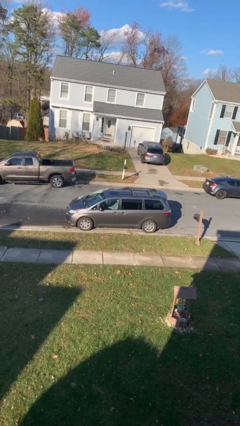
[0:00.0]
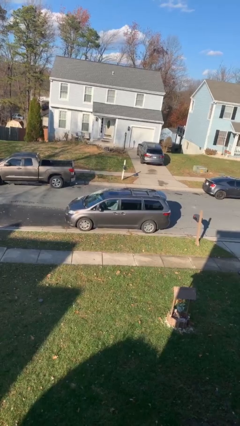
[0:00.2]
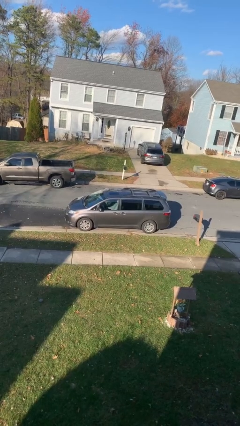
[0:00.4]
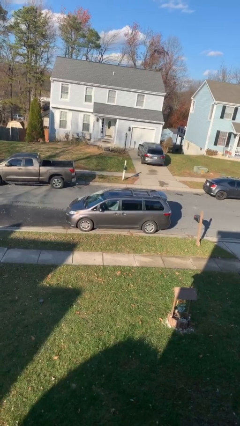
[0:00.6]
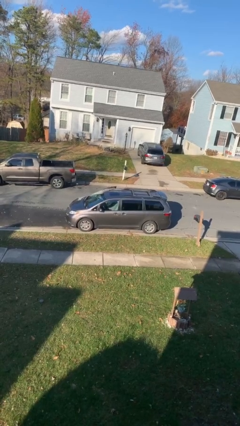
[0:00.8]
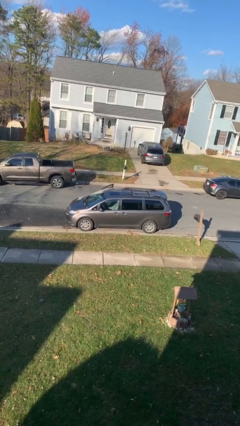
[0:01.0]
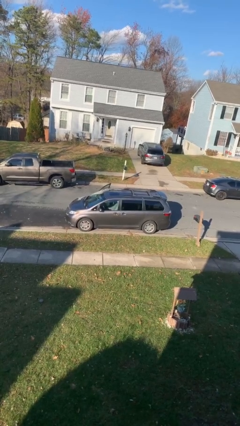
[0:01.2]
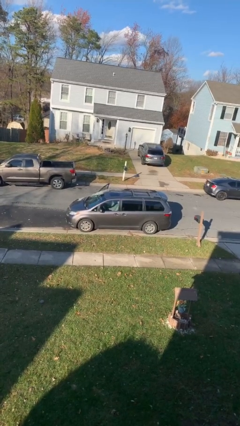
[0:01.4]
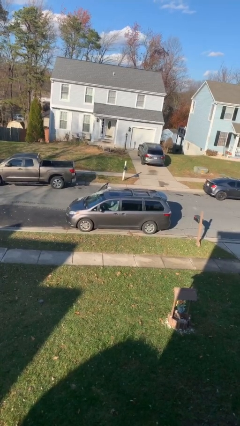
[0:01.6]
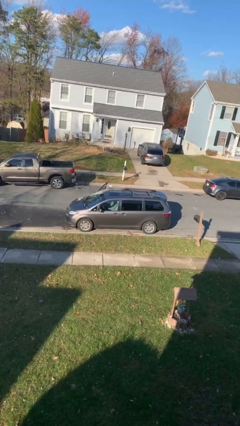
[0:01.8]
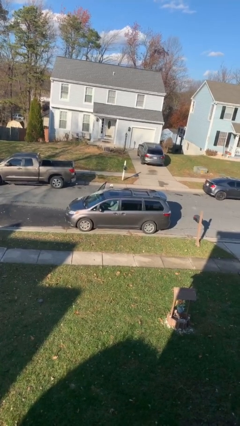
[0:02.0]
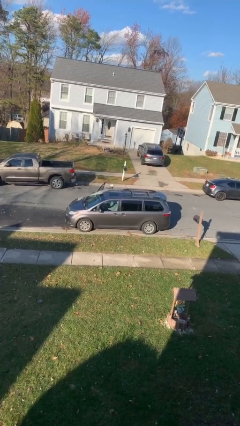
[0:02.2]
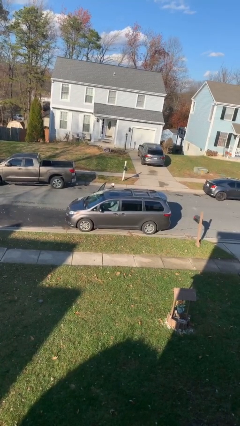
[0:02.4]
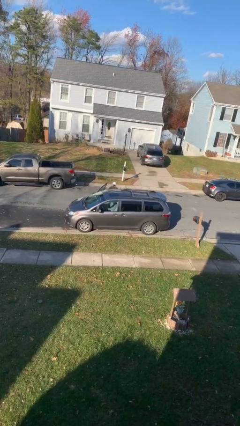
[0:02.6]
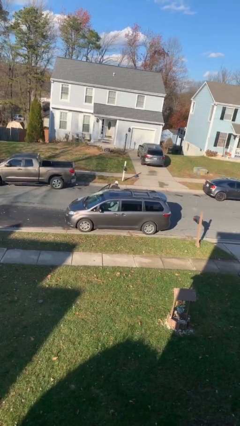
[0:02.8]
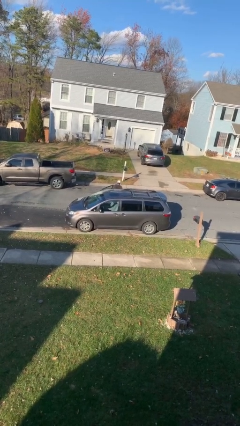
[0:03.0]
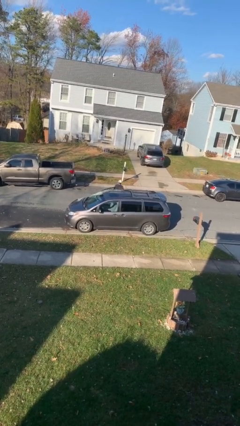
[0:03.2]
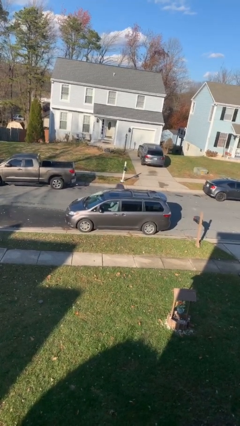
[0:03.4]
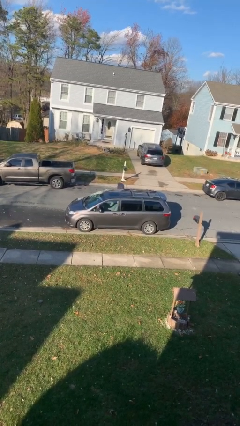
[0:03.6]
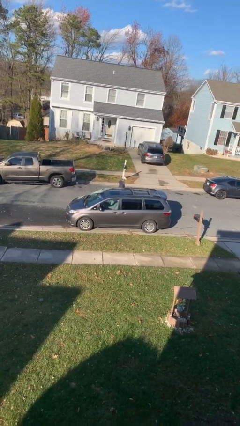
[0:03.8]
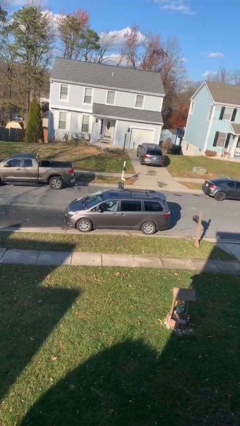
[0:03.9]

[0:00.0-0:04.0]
car drops off person

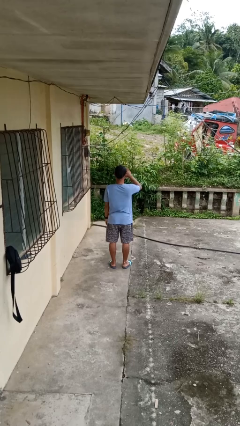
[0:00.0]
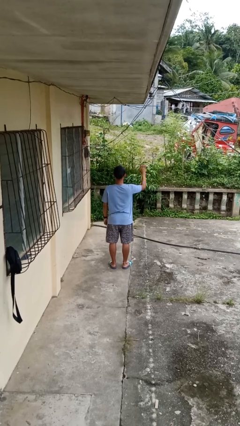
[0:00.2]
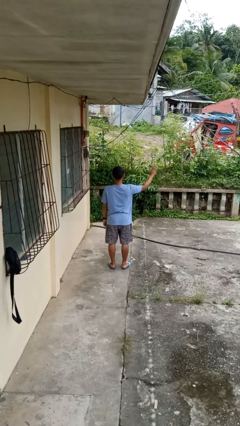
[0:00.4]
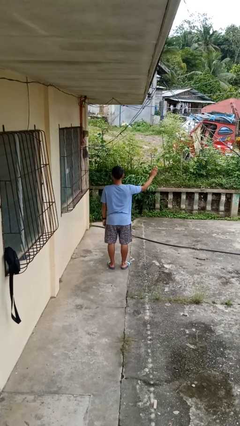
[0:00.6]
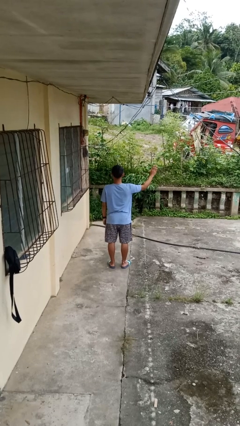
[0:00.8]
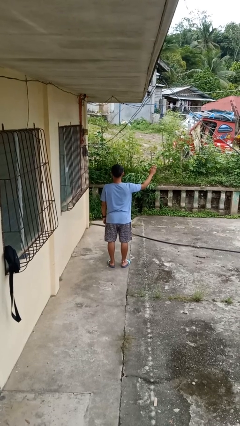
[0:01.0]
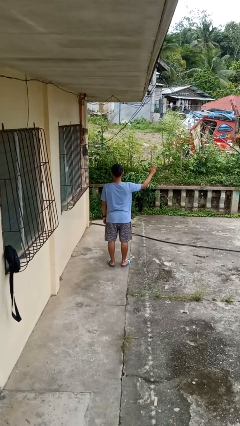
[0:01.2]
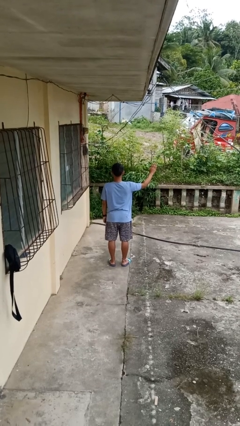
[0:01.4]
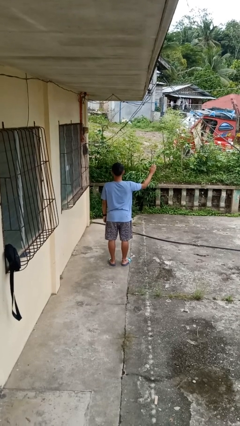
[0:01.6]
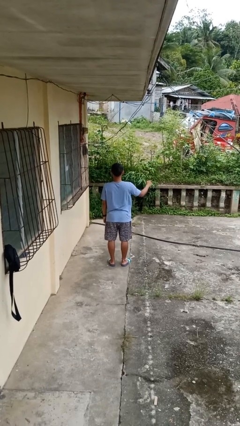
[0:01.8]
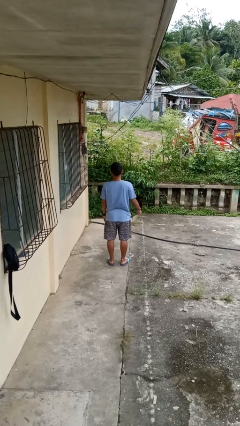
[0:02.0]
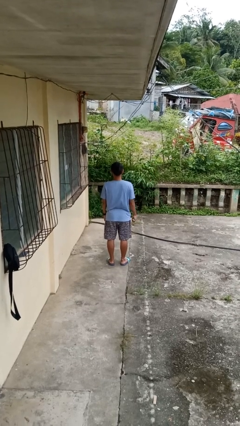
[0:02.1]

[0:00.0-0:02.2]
person gestures swipe right

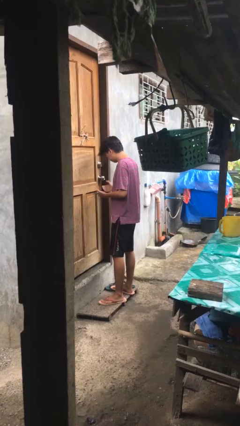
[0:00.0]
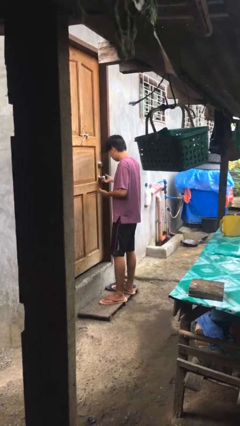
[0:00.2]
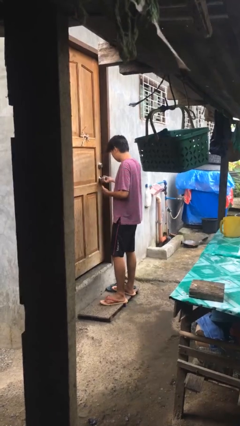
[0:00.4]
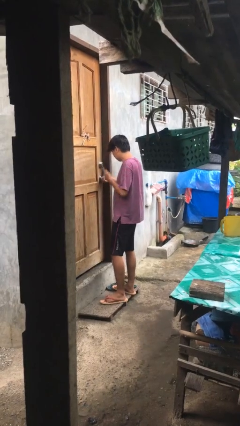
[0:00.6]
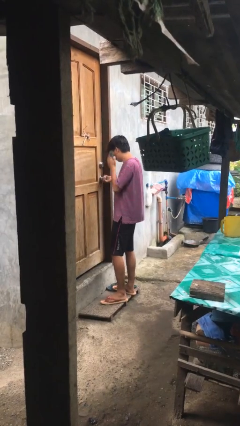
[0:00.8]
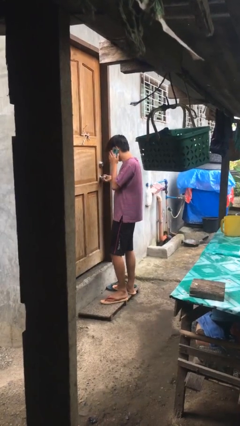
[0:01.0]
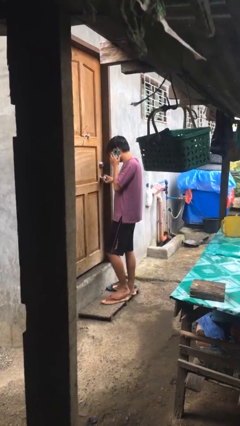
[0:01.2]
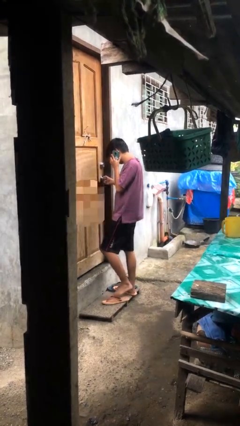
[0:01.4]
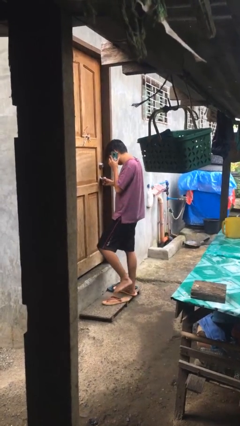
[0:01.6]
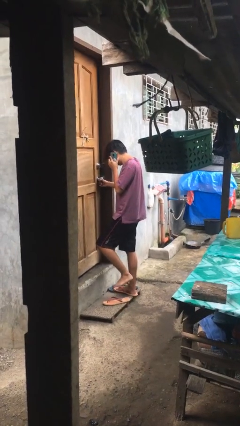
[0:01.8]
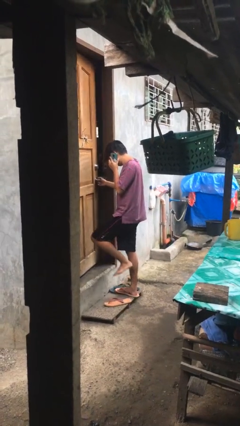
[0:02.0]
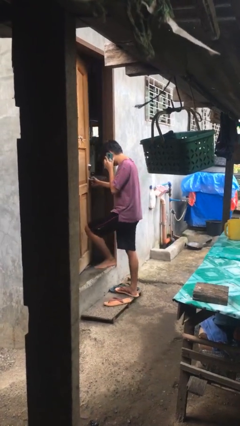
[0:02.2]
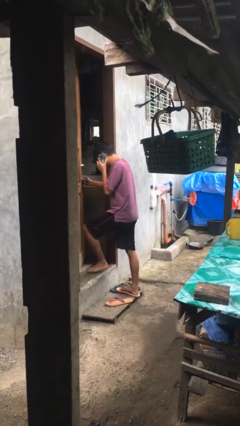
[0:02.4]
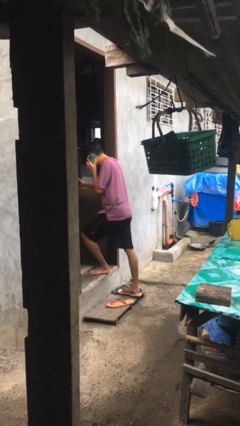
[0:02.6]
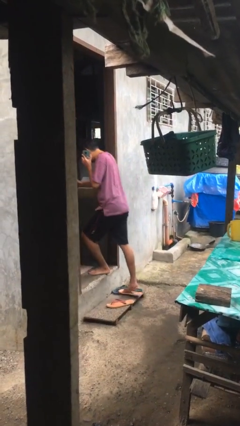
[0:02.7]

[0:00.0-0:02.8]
person opens facility door

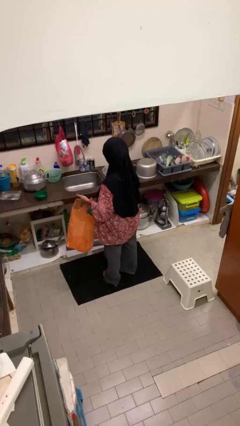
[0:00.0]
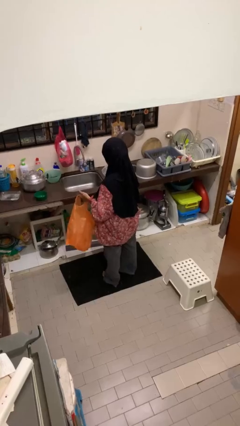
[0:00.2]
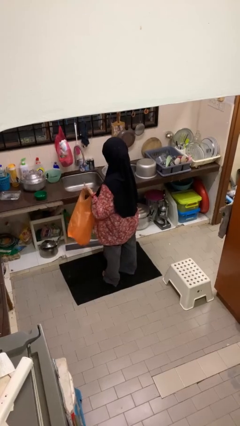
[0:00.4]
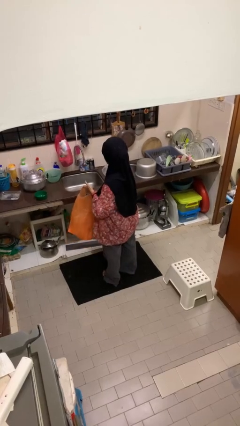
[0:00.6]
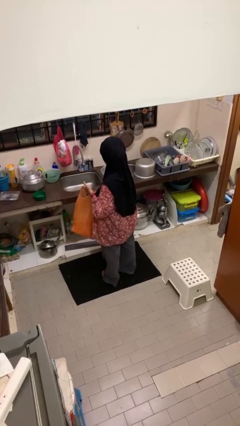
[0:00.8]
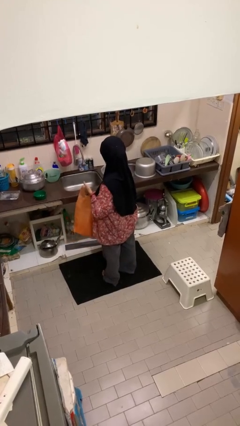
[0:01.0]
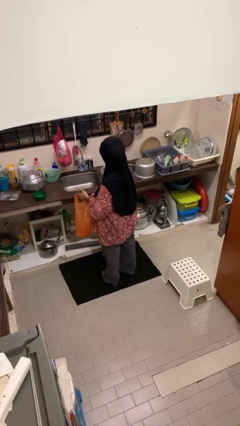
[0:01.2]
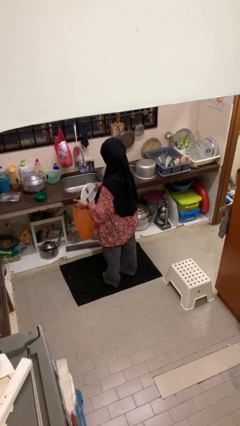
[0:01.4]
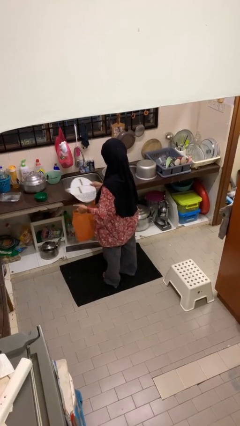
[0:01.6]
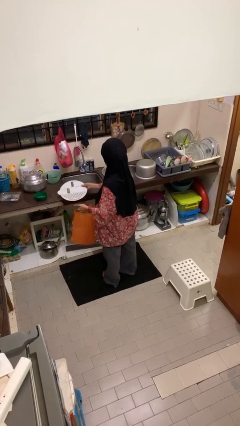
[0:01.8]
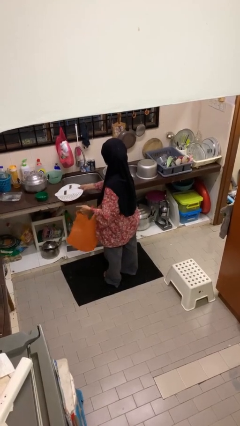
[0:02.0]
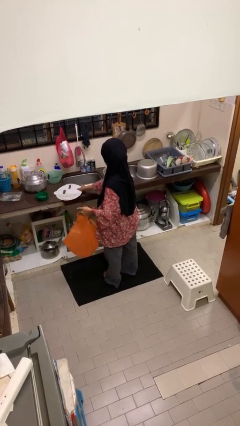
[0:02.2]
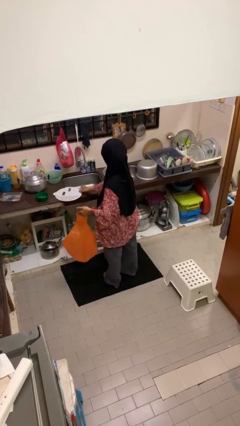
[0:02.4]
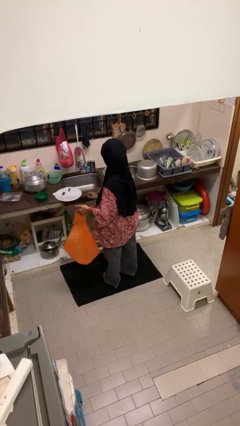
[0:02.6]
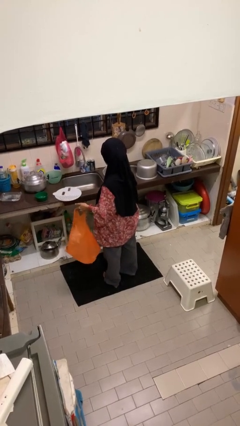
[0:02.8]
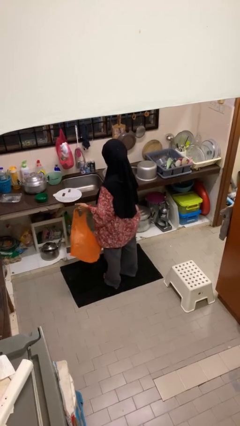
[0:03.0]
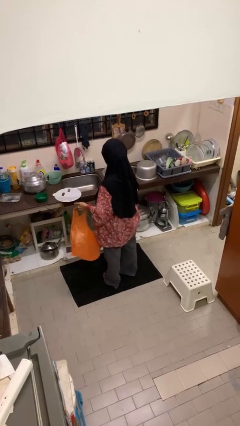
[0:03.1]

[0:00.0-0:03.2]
person takes object from bag

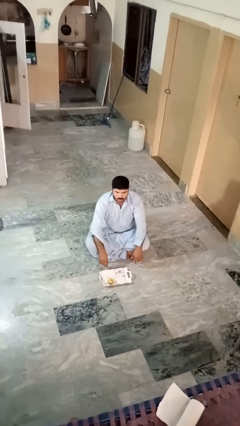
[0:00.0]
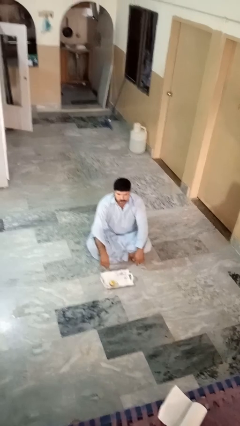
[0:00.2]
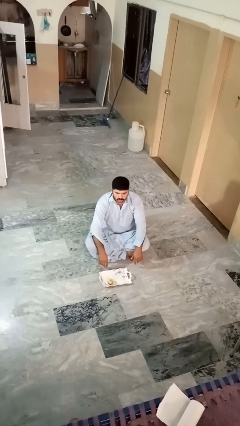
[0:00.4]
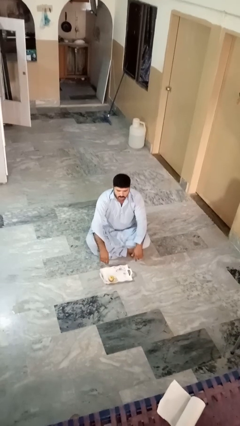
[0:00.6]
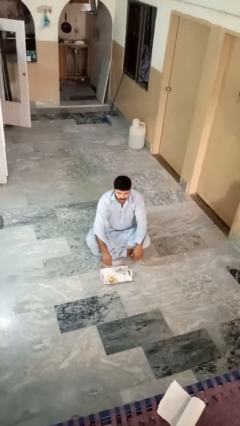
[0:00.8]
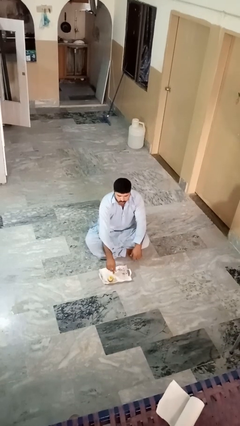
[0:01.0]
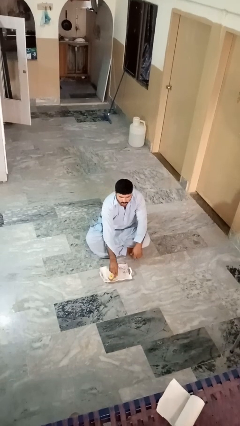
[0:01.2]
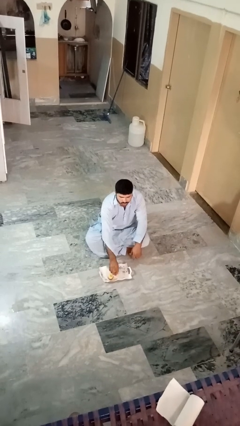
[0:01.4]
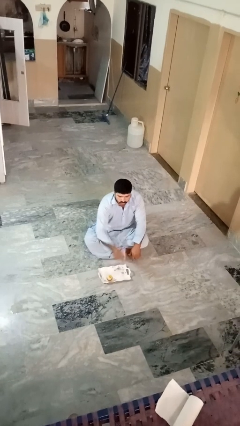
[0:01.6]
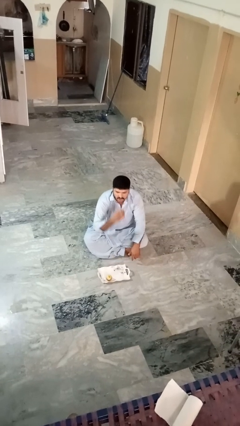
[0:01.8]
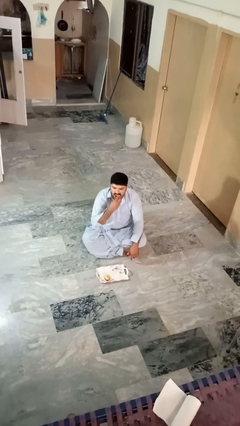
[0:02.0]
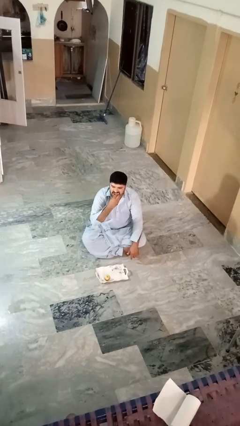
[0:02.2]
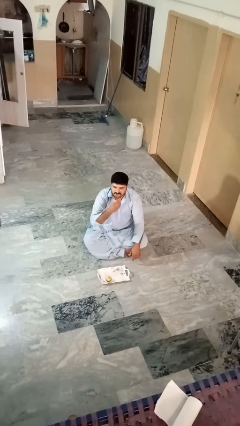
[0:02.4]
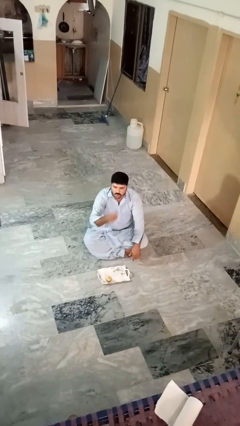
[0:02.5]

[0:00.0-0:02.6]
person eats apple

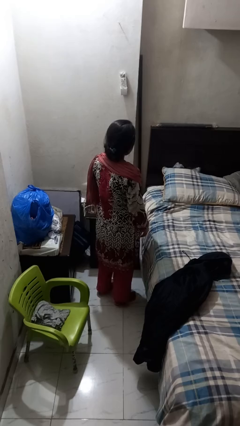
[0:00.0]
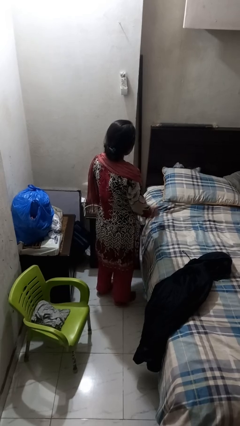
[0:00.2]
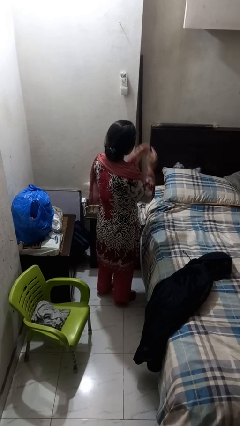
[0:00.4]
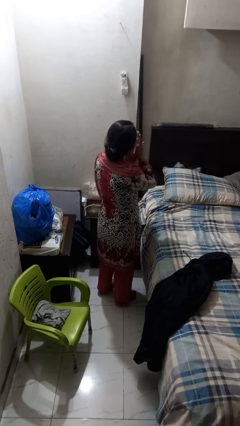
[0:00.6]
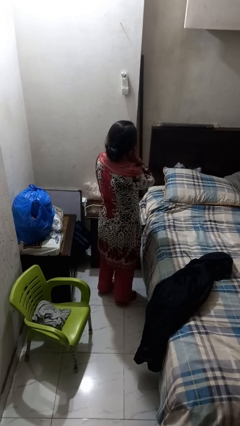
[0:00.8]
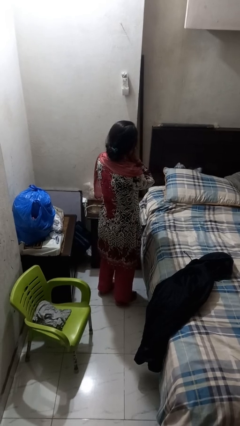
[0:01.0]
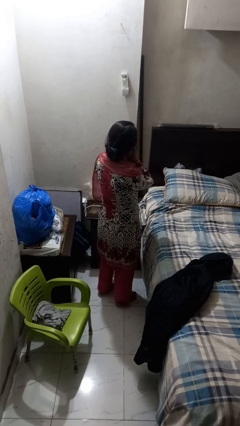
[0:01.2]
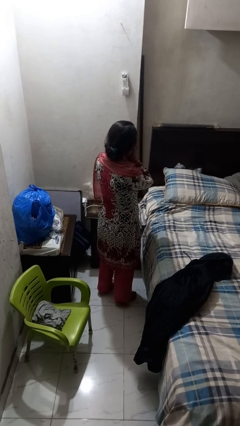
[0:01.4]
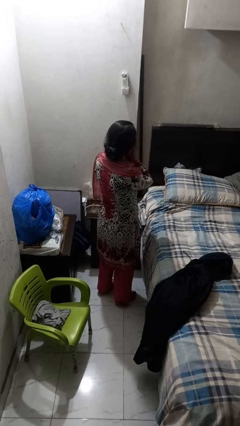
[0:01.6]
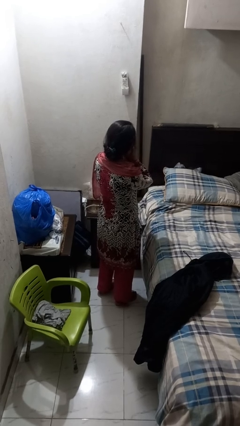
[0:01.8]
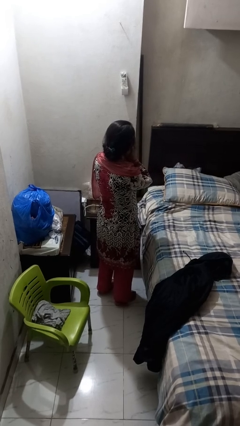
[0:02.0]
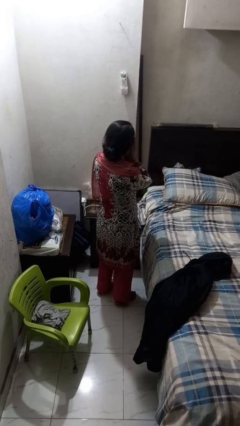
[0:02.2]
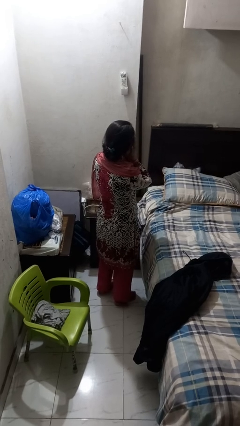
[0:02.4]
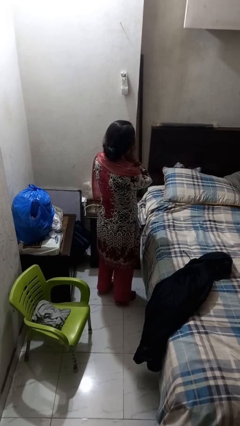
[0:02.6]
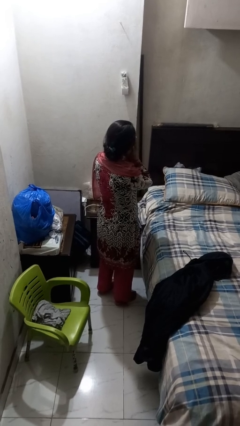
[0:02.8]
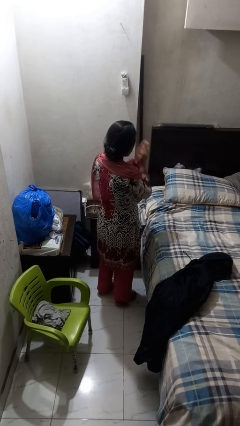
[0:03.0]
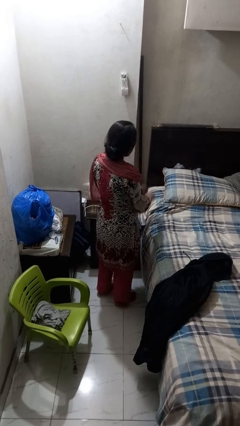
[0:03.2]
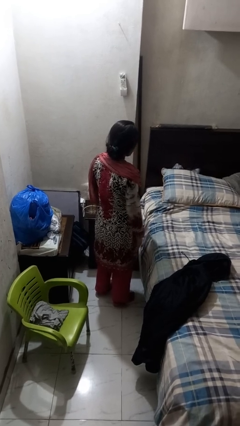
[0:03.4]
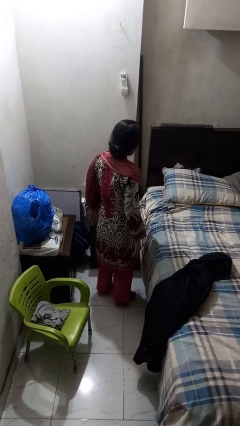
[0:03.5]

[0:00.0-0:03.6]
person covers face with hands
